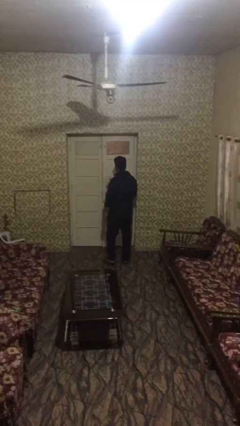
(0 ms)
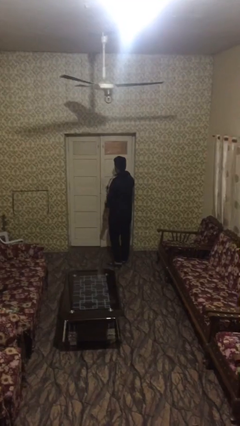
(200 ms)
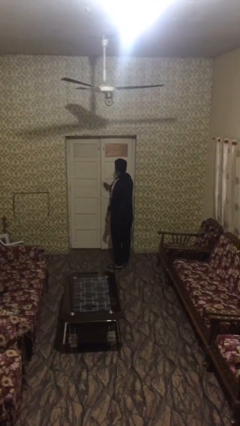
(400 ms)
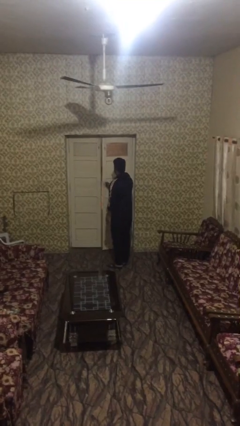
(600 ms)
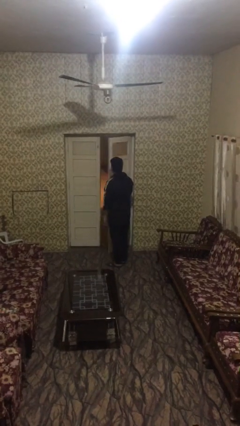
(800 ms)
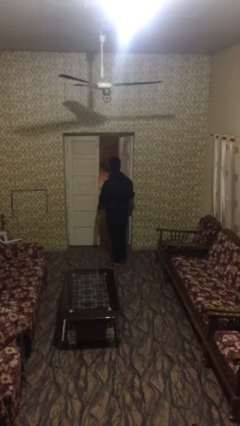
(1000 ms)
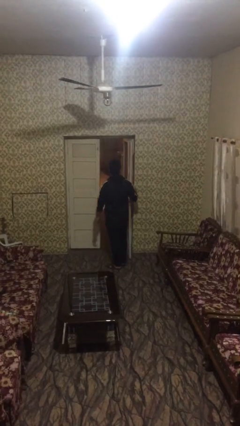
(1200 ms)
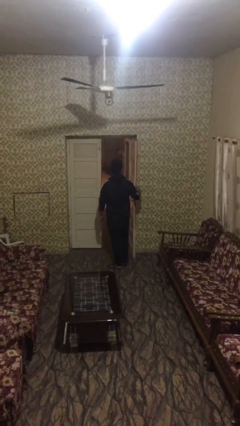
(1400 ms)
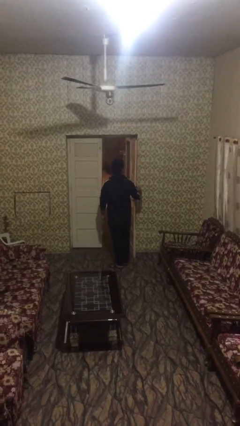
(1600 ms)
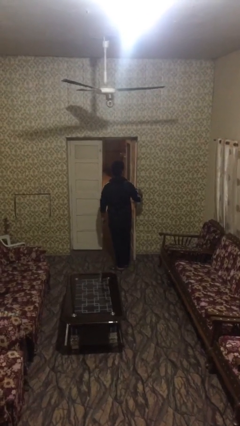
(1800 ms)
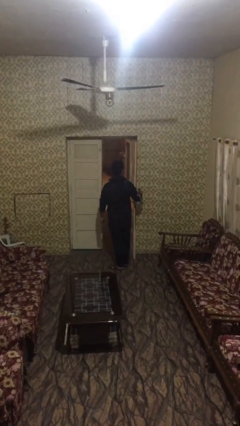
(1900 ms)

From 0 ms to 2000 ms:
person opens facility door

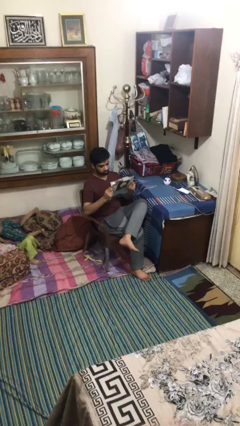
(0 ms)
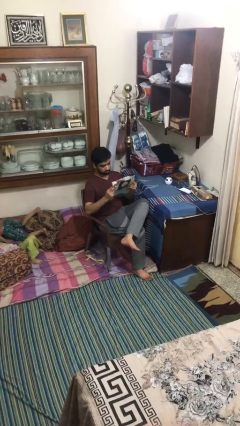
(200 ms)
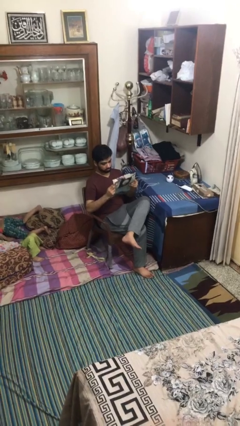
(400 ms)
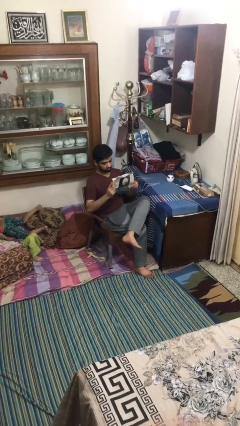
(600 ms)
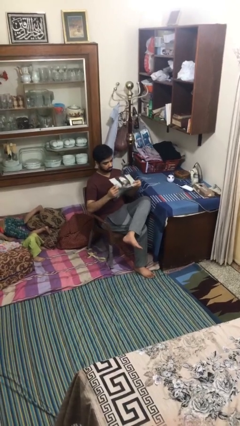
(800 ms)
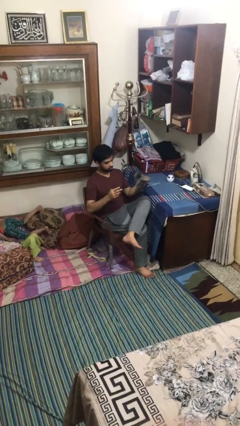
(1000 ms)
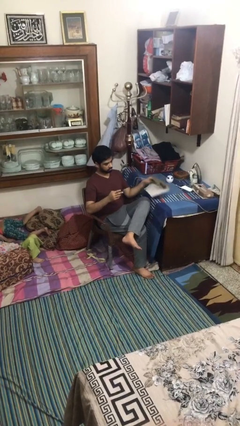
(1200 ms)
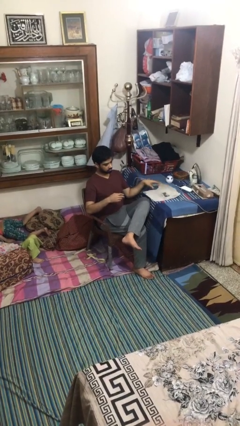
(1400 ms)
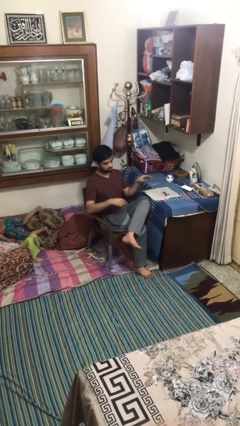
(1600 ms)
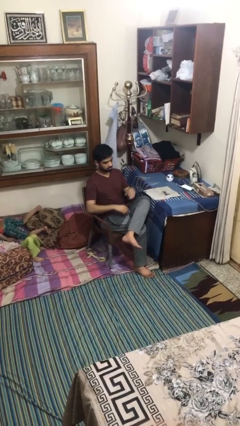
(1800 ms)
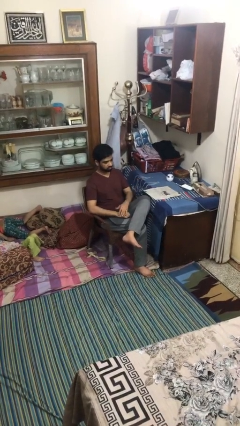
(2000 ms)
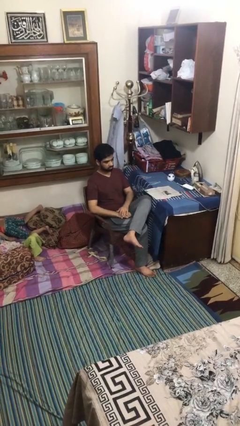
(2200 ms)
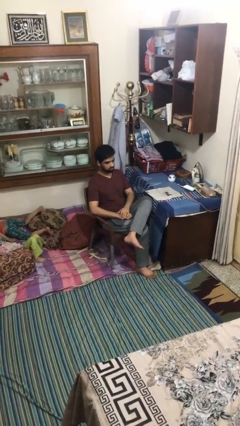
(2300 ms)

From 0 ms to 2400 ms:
person puts down object on table

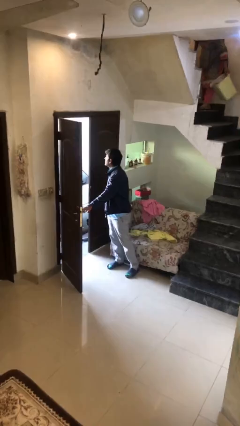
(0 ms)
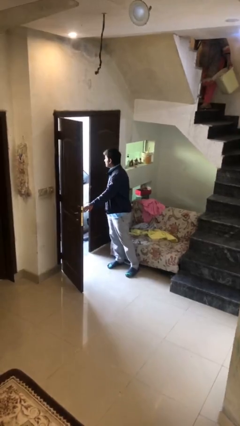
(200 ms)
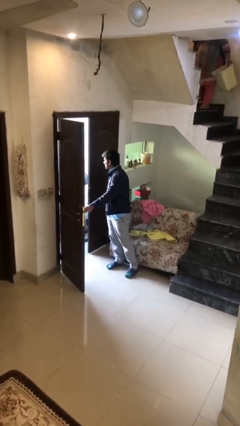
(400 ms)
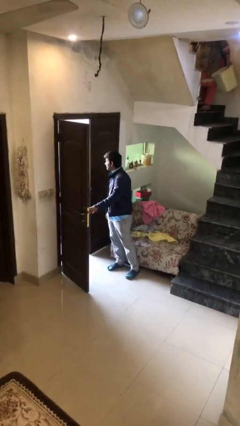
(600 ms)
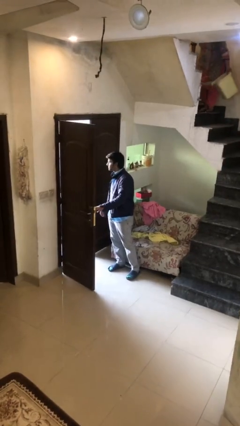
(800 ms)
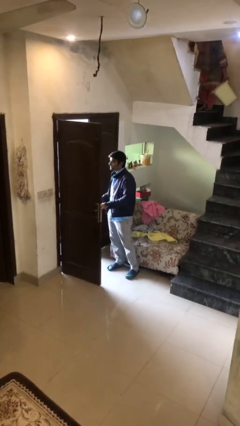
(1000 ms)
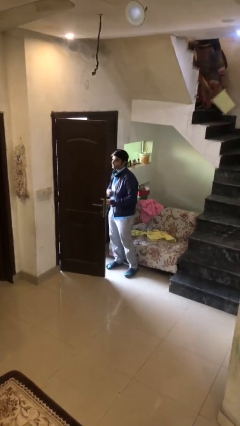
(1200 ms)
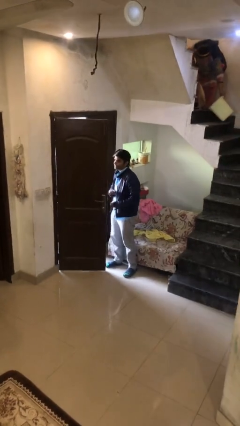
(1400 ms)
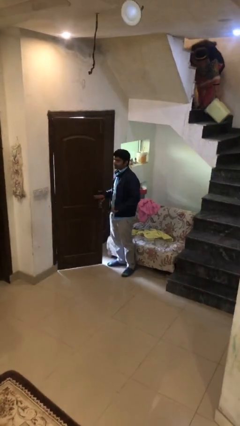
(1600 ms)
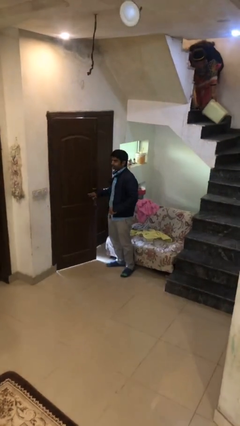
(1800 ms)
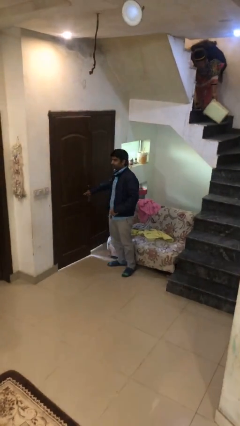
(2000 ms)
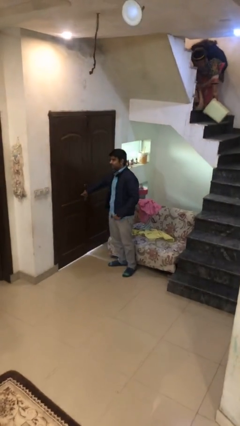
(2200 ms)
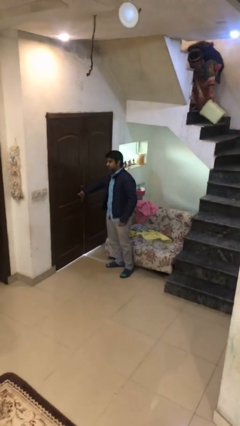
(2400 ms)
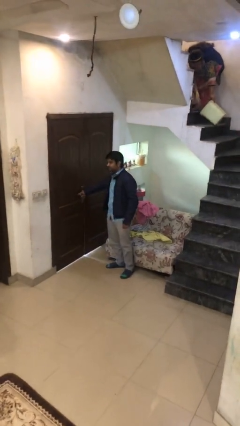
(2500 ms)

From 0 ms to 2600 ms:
person closes facility door

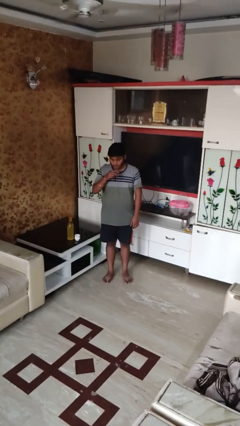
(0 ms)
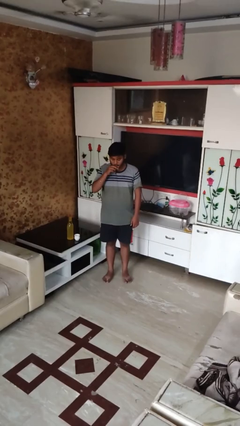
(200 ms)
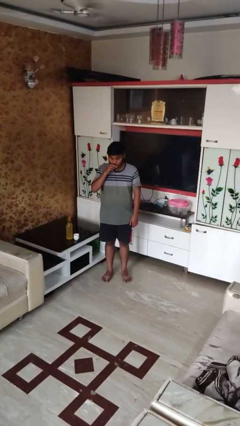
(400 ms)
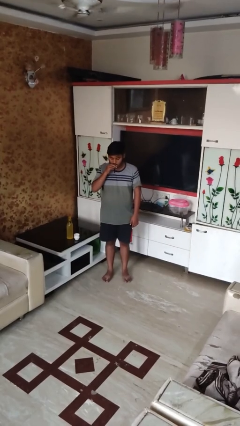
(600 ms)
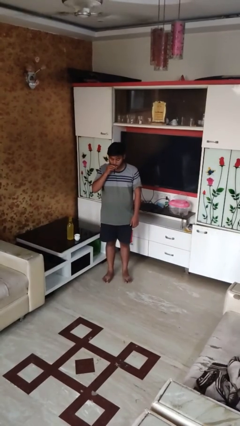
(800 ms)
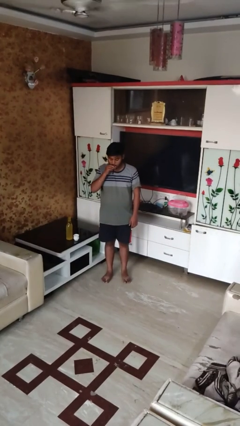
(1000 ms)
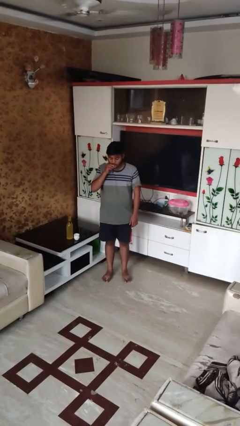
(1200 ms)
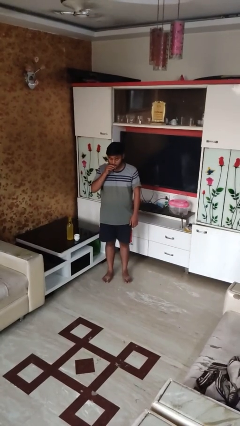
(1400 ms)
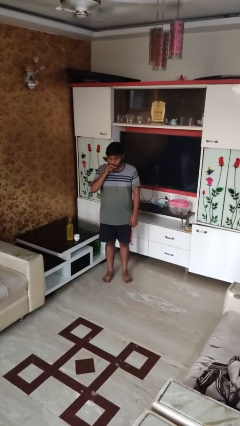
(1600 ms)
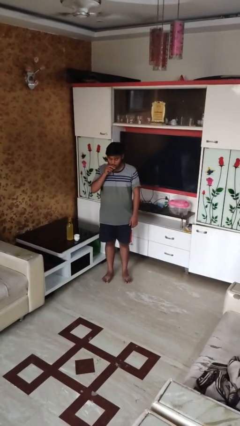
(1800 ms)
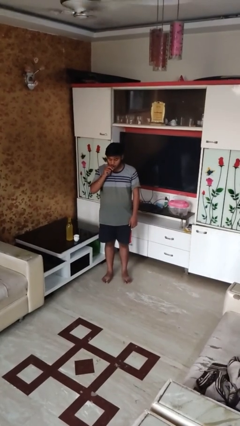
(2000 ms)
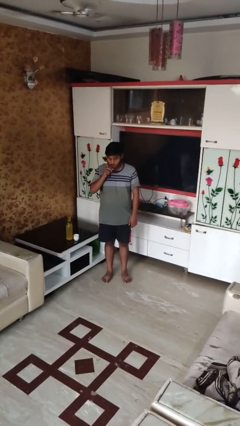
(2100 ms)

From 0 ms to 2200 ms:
person vapes

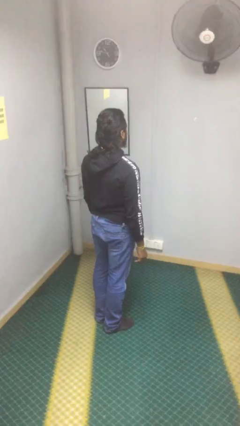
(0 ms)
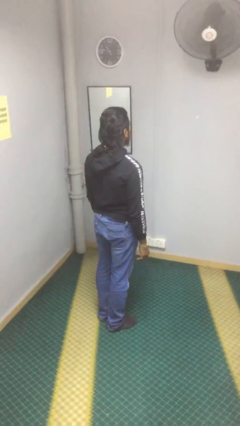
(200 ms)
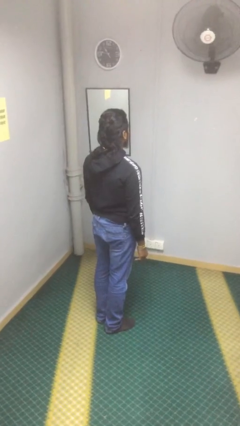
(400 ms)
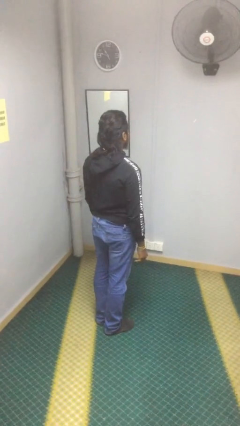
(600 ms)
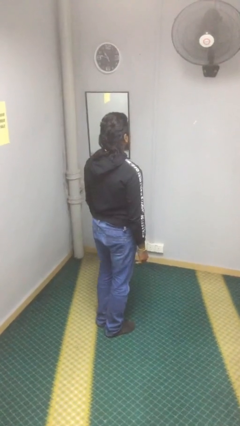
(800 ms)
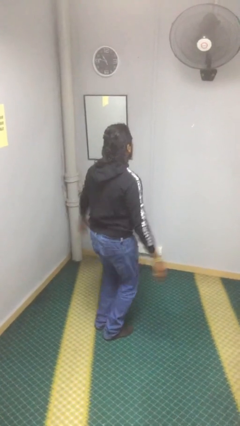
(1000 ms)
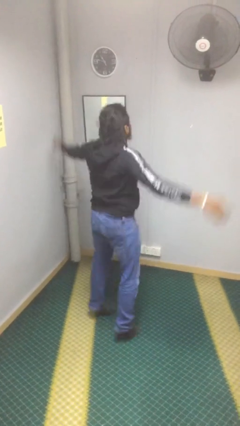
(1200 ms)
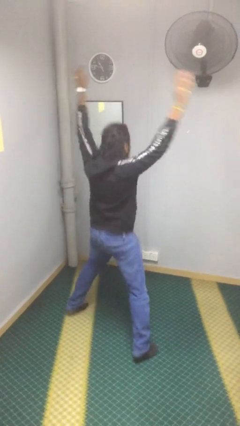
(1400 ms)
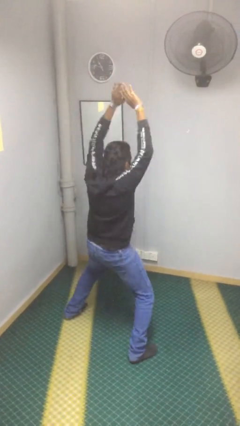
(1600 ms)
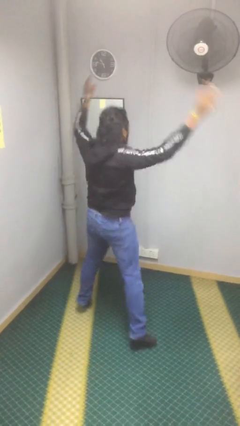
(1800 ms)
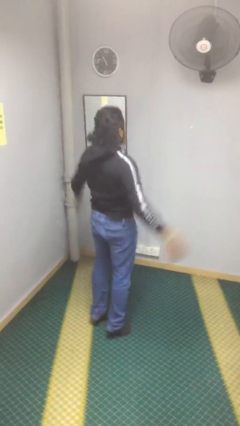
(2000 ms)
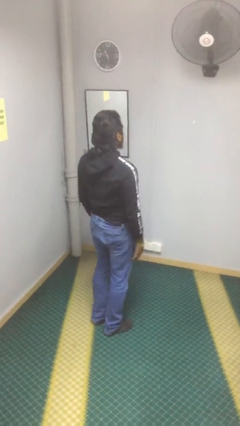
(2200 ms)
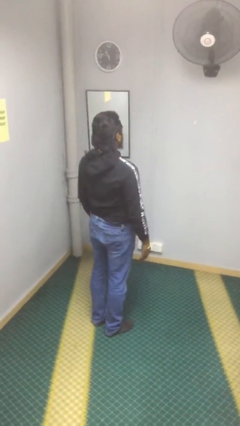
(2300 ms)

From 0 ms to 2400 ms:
person exercises with jumping jacks

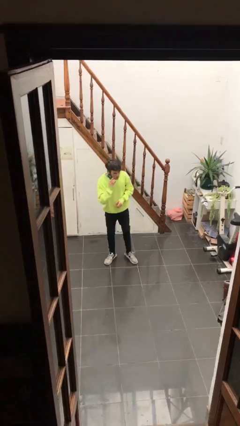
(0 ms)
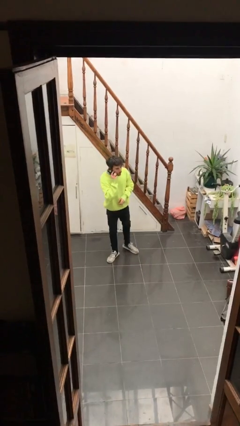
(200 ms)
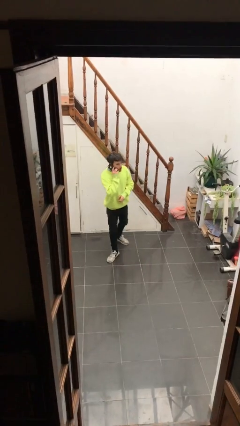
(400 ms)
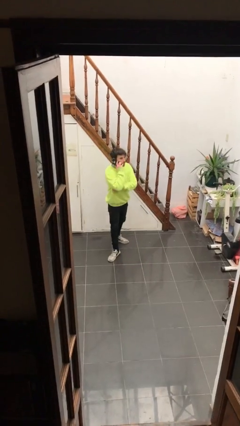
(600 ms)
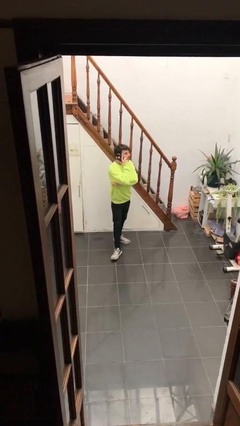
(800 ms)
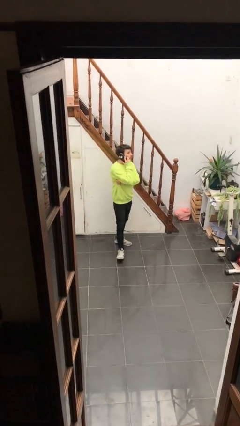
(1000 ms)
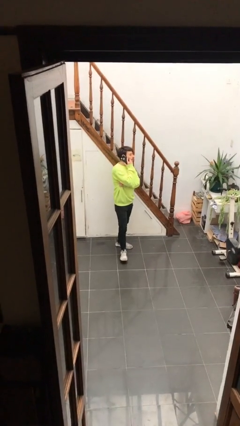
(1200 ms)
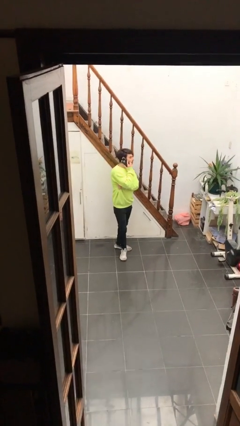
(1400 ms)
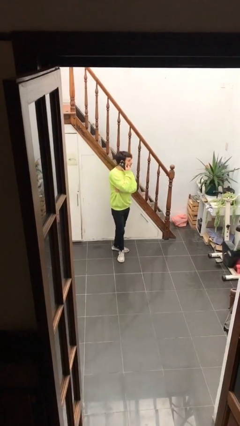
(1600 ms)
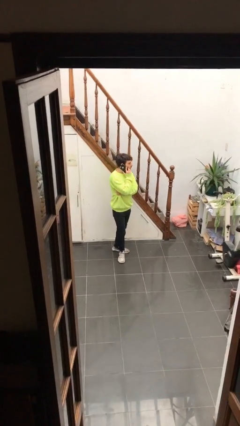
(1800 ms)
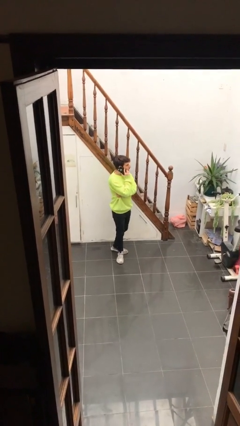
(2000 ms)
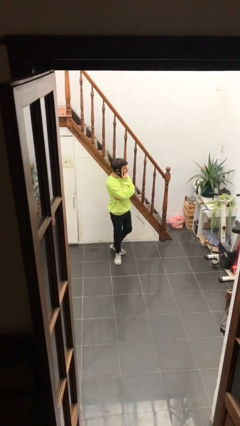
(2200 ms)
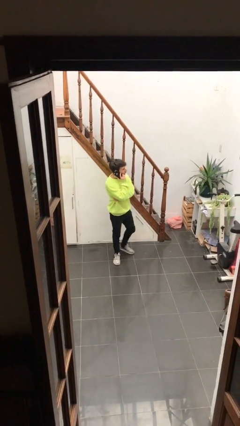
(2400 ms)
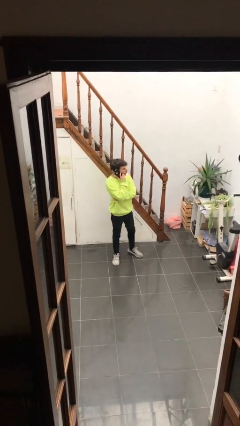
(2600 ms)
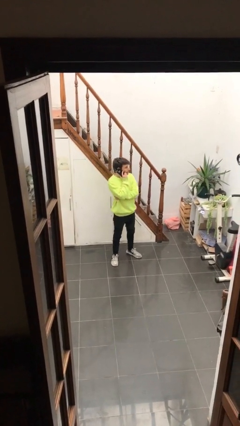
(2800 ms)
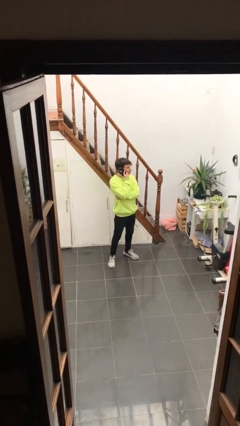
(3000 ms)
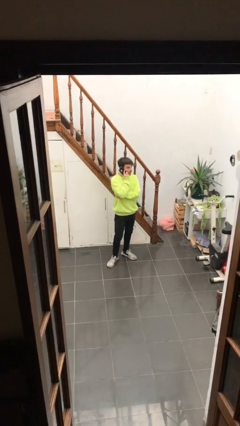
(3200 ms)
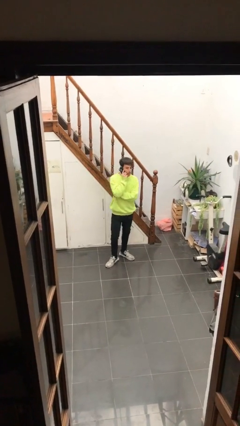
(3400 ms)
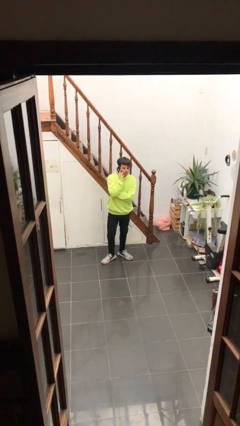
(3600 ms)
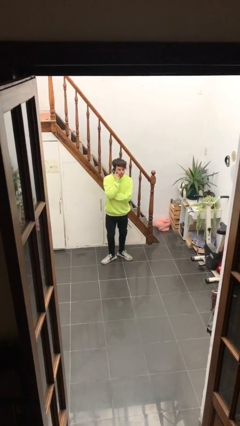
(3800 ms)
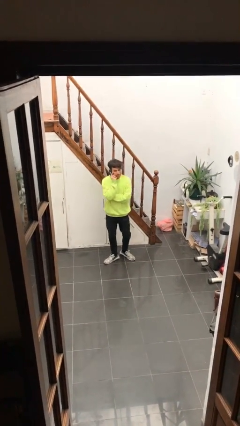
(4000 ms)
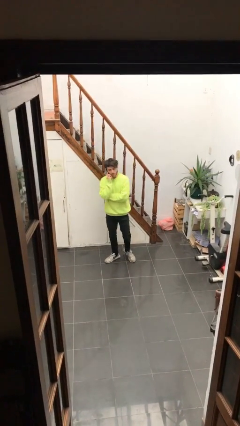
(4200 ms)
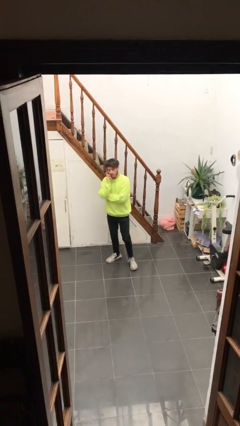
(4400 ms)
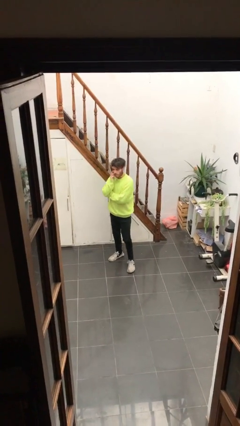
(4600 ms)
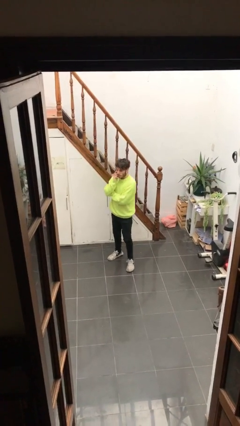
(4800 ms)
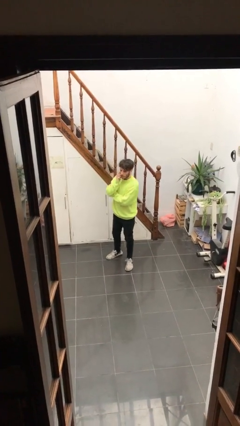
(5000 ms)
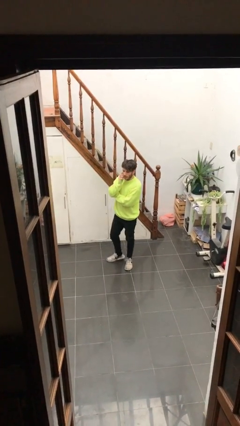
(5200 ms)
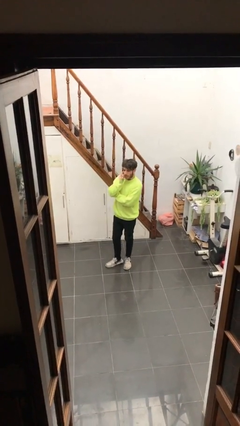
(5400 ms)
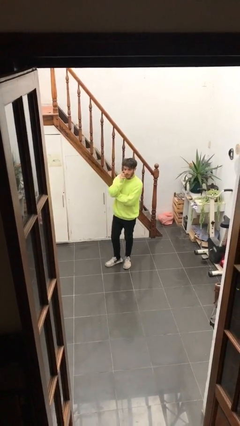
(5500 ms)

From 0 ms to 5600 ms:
person talks on phone

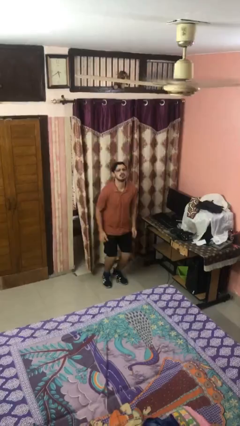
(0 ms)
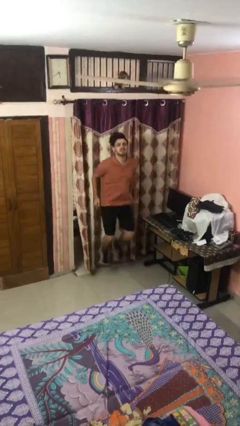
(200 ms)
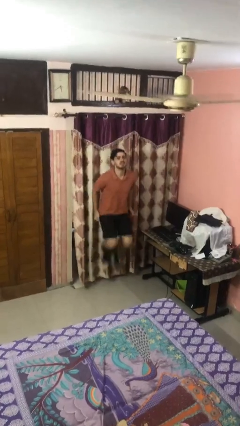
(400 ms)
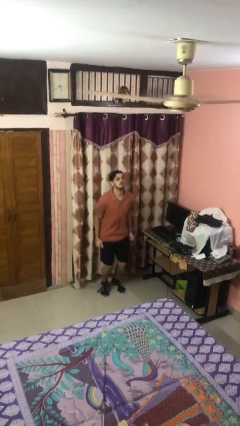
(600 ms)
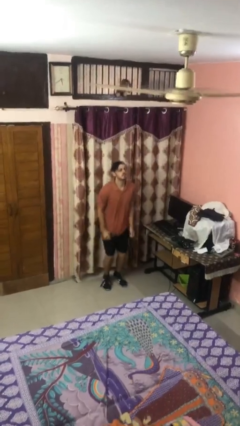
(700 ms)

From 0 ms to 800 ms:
person jumps
